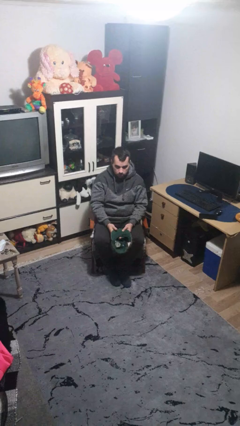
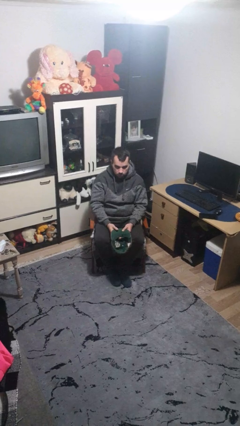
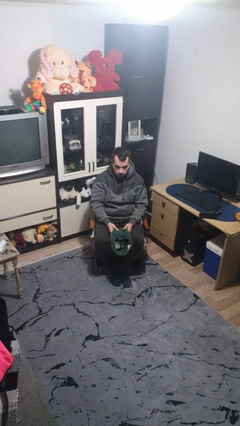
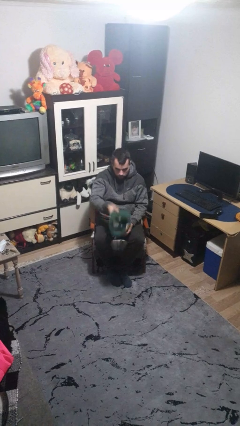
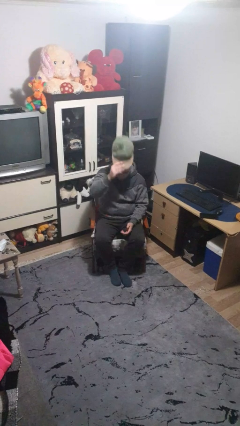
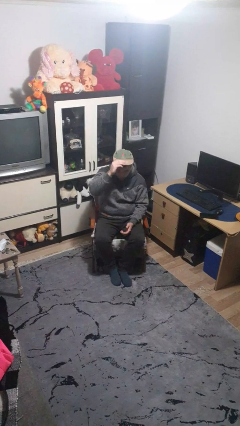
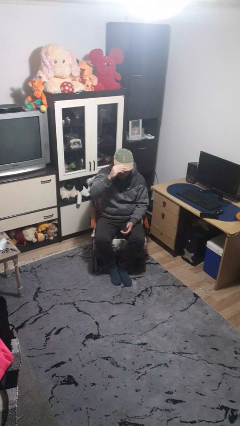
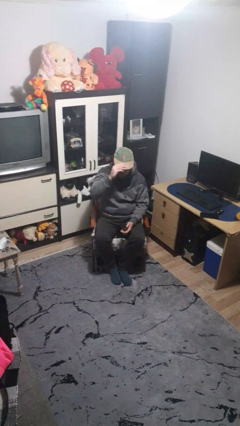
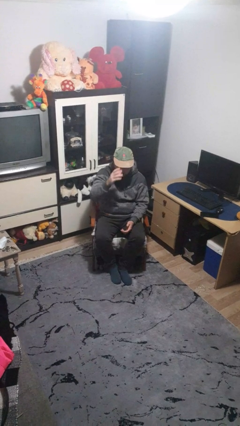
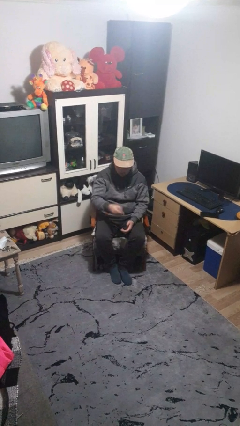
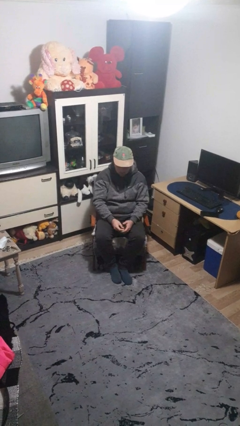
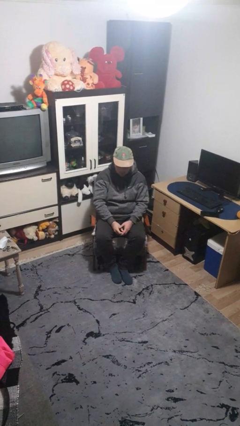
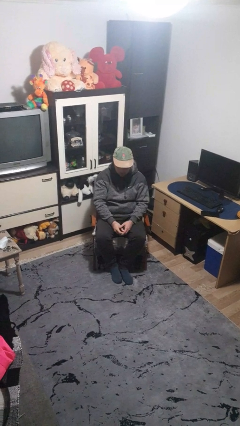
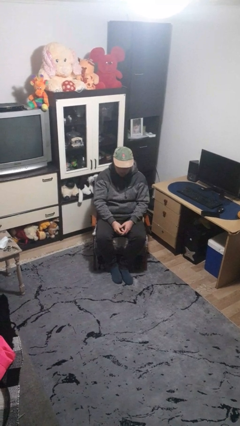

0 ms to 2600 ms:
person puts on hat

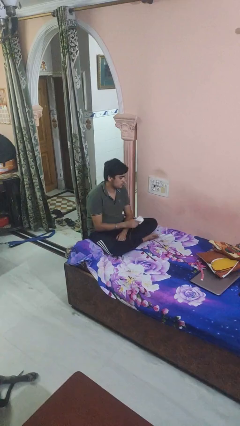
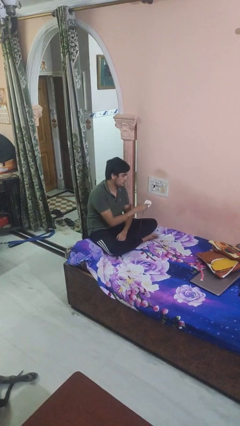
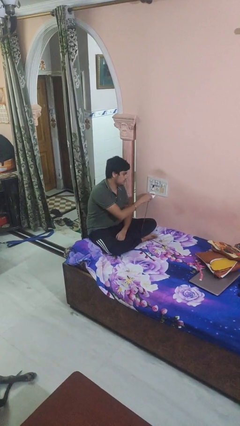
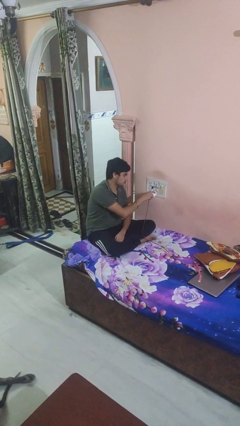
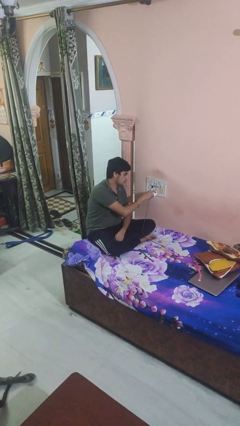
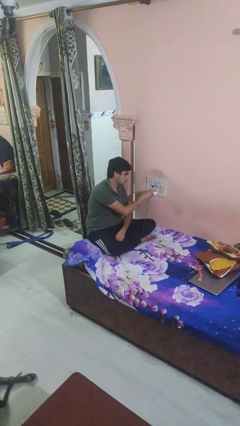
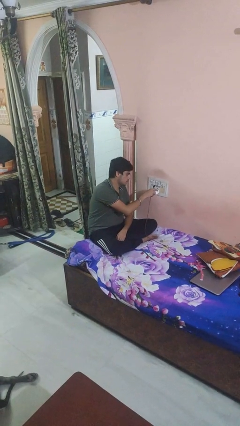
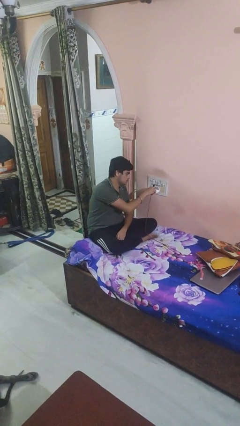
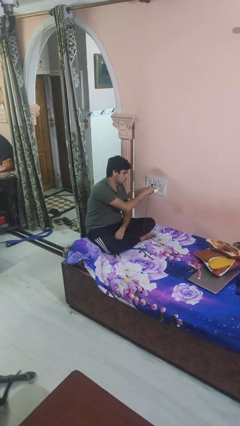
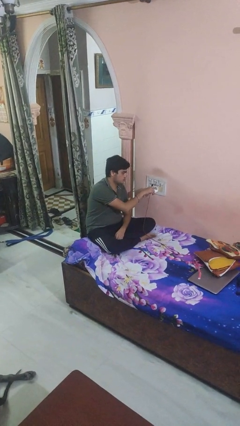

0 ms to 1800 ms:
person plugs into electrical socket

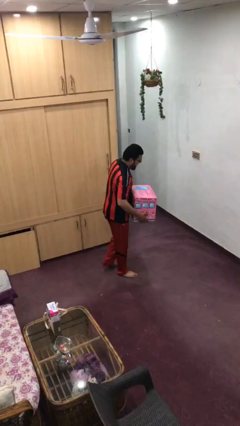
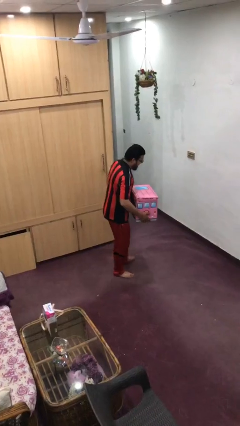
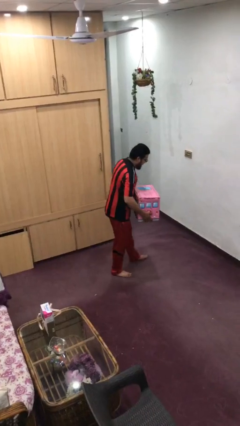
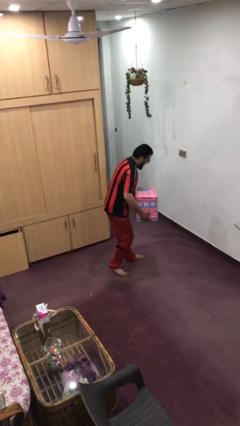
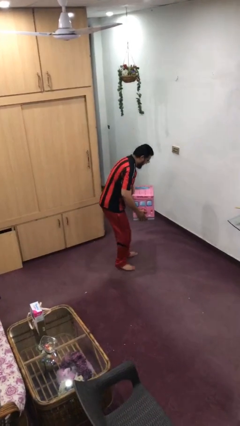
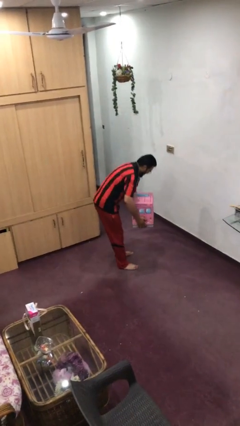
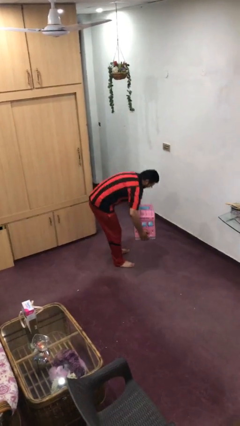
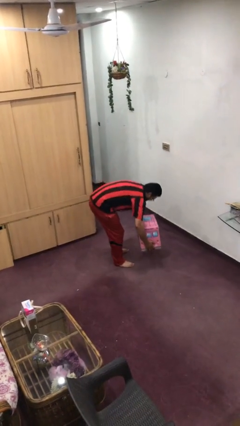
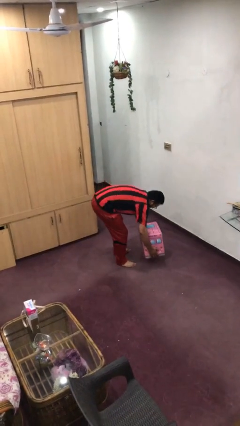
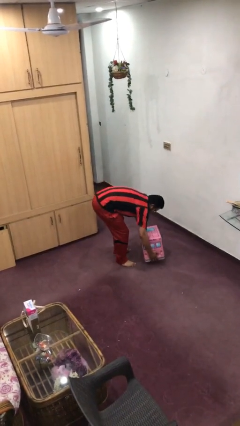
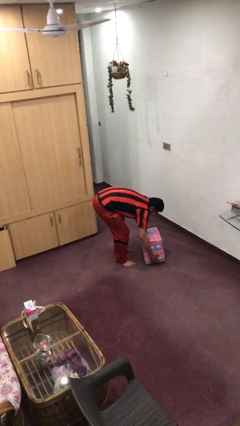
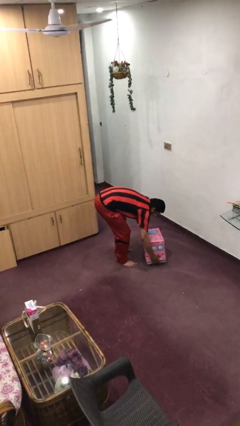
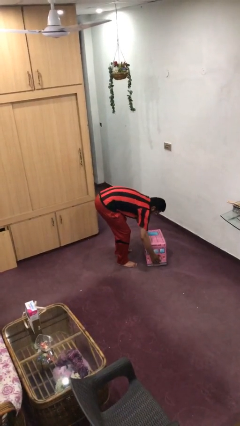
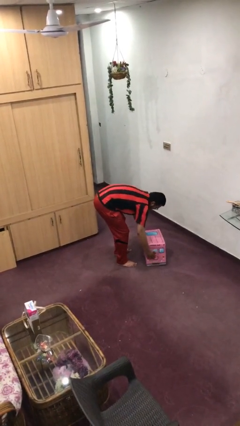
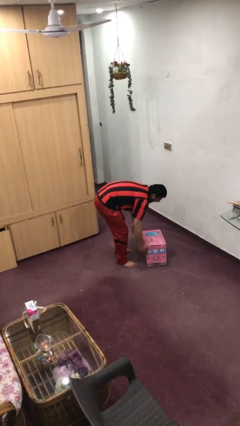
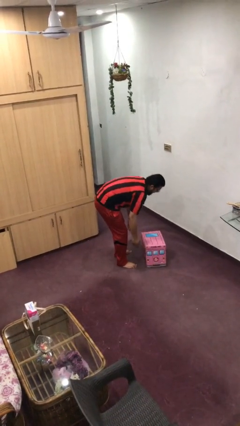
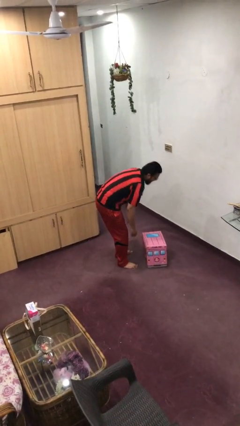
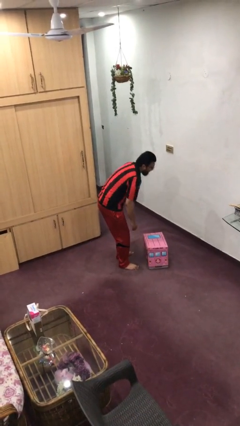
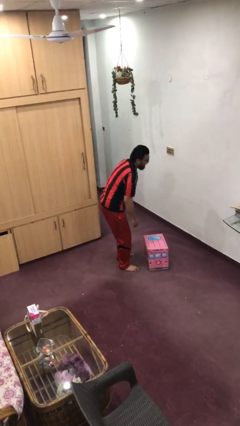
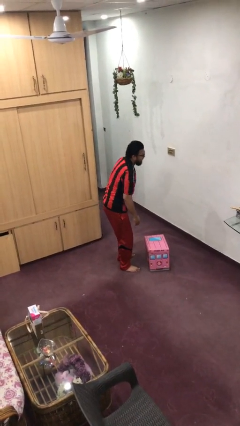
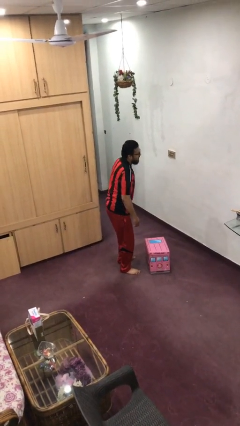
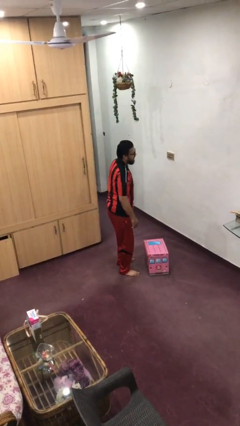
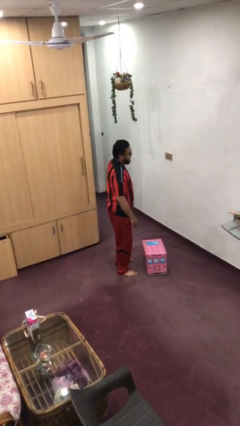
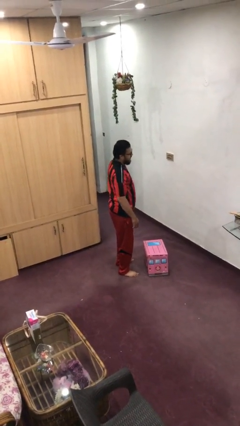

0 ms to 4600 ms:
person puts down object on floor

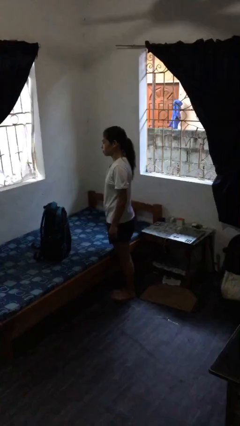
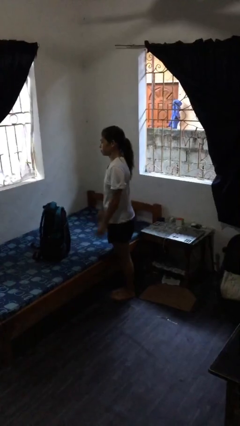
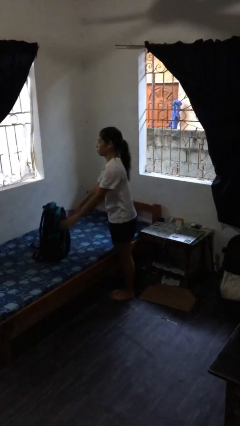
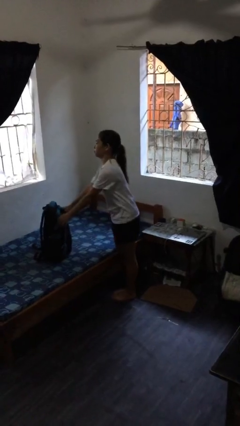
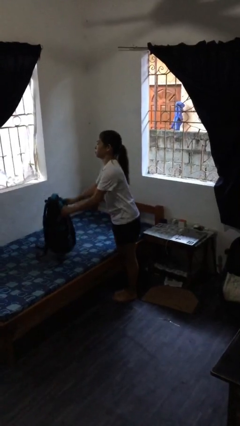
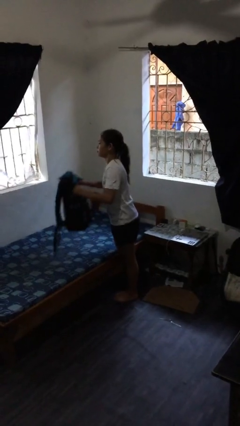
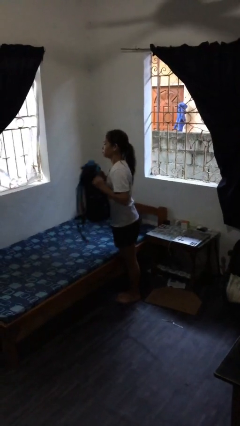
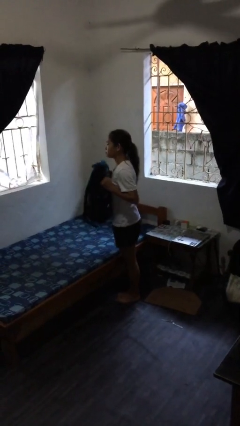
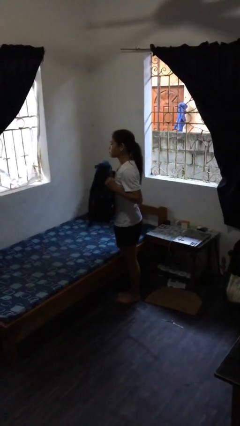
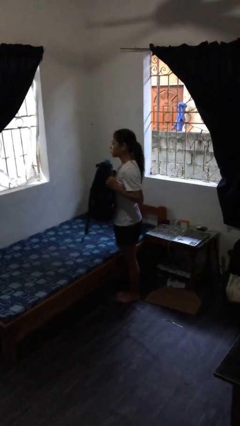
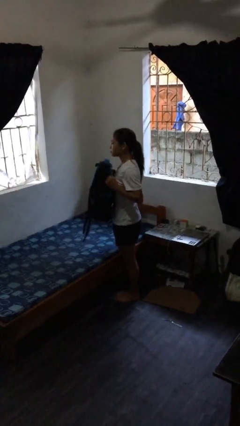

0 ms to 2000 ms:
person picks up object from bed

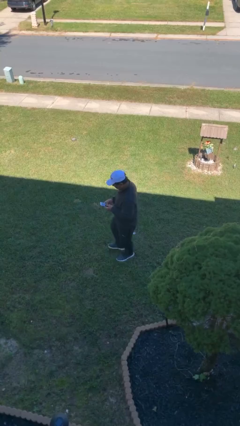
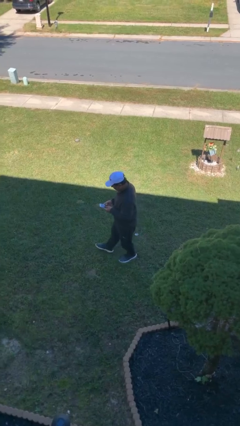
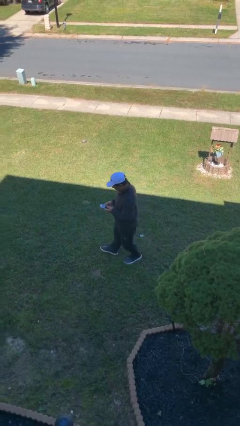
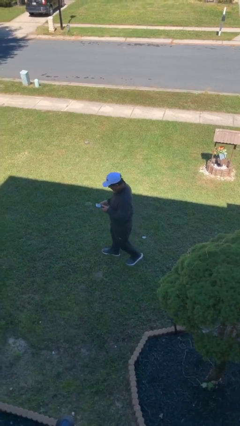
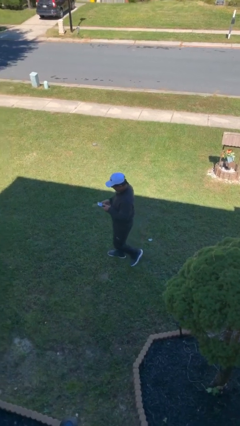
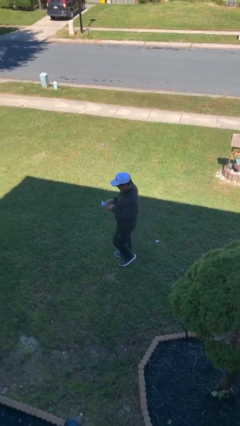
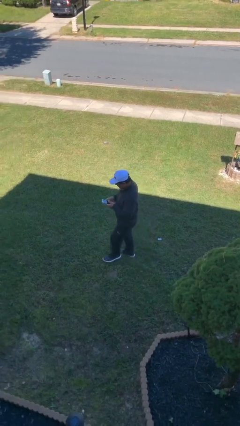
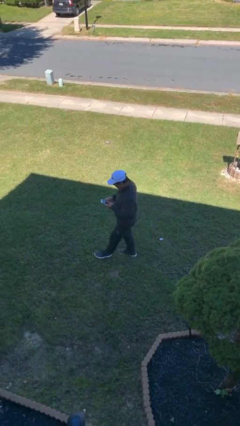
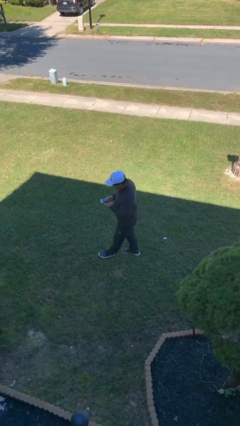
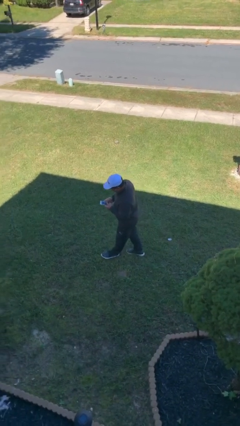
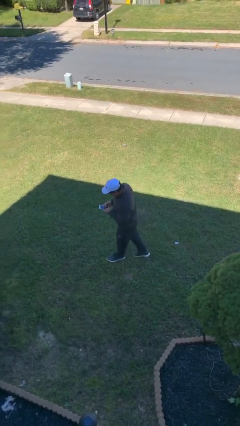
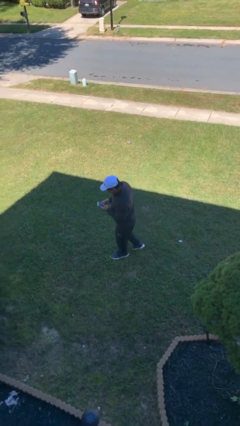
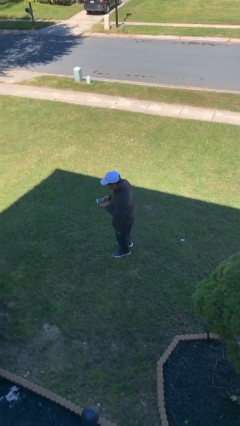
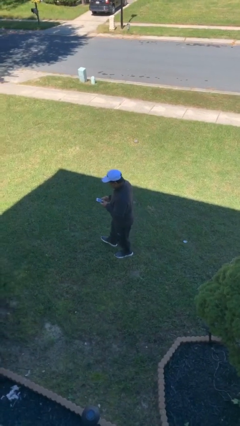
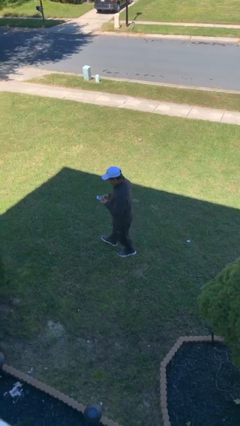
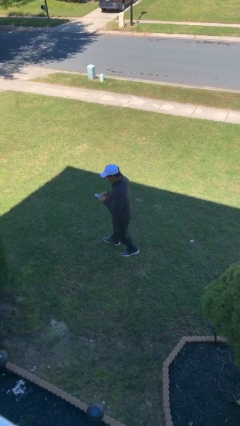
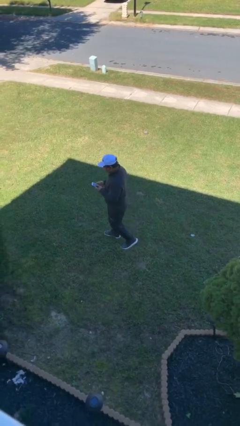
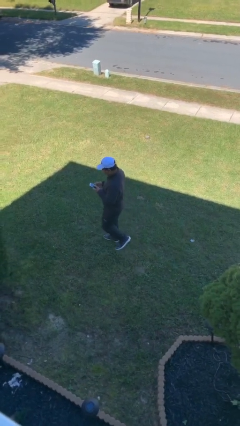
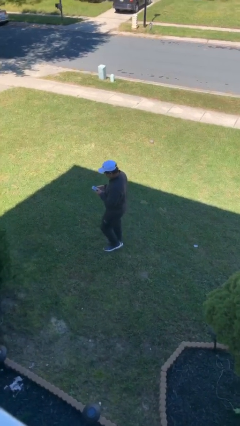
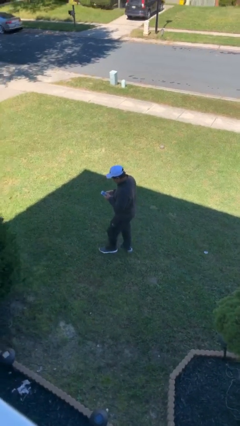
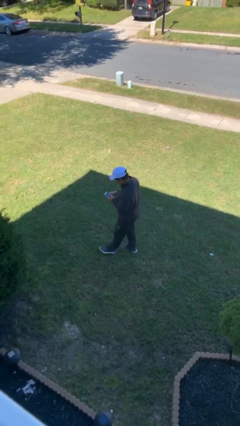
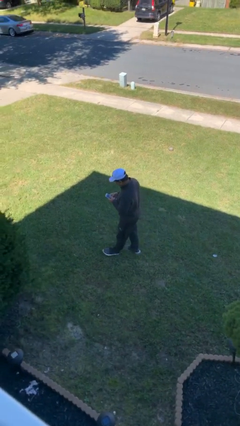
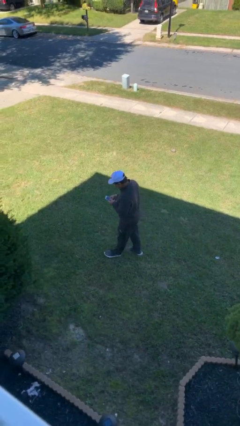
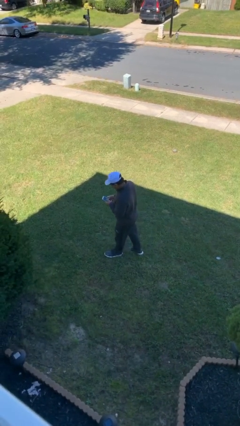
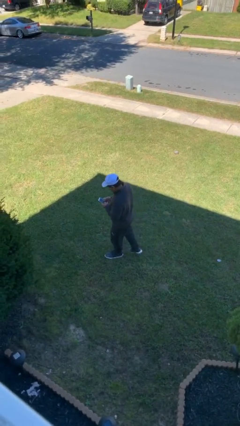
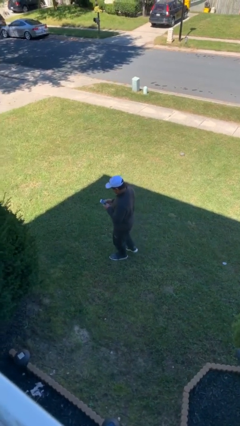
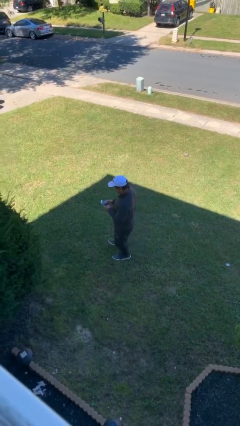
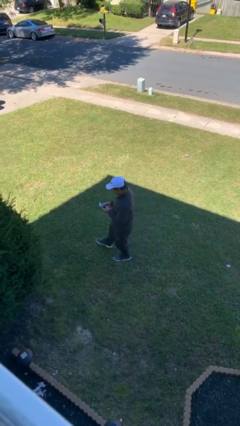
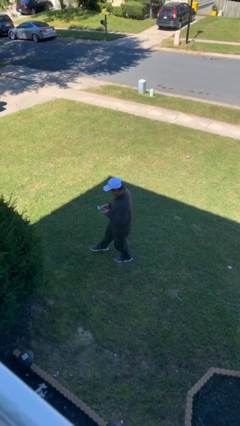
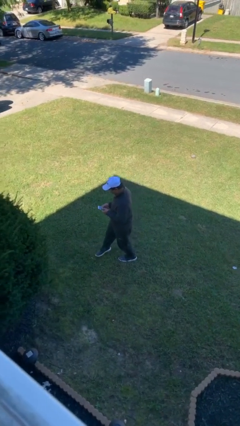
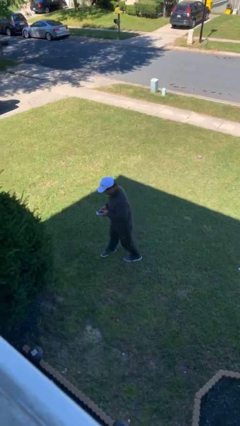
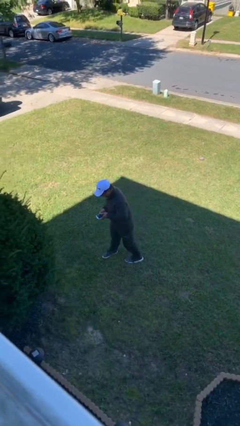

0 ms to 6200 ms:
person texts on phone

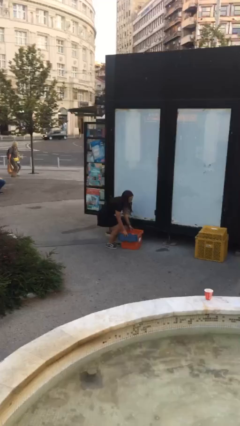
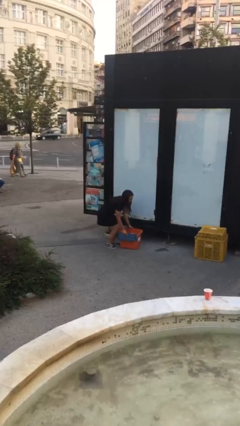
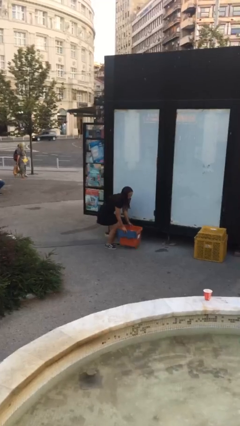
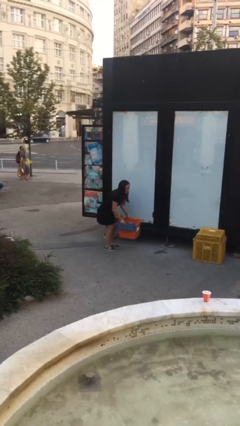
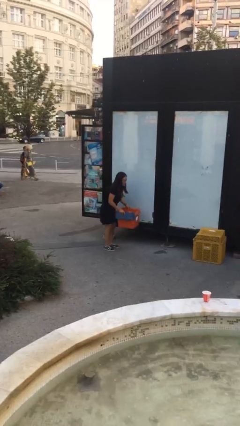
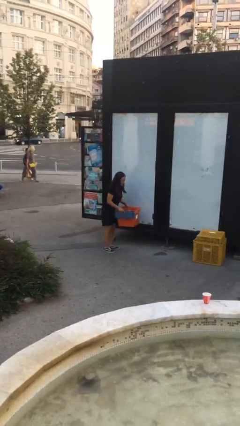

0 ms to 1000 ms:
person picks up object from floor
